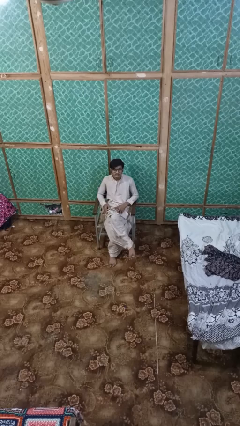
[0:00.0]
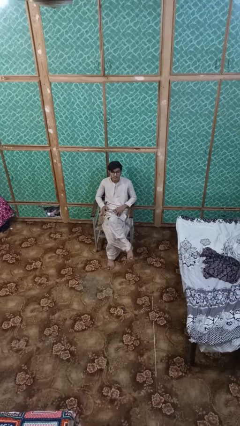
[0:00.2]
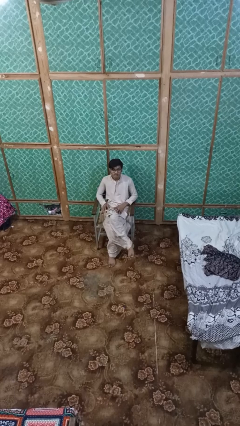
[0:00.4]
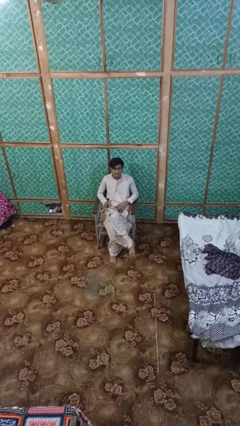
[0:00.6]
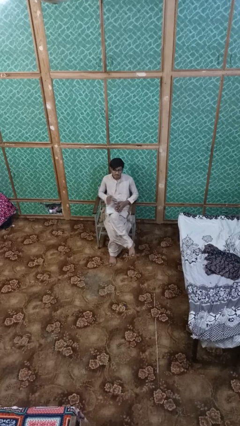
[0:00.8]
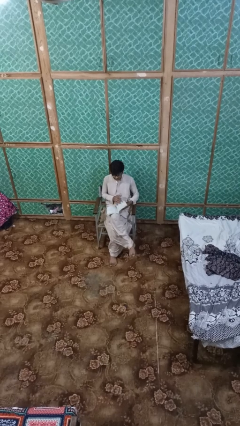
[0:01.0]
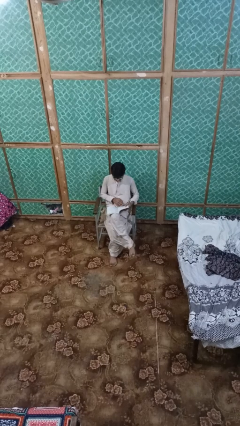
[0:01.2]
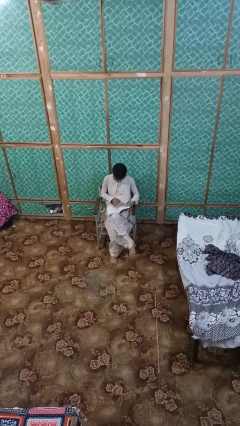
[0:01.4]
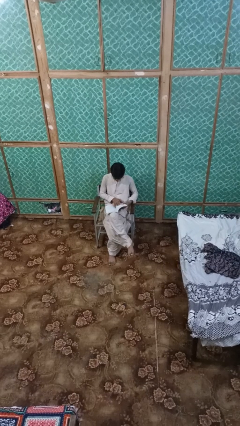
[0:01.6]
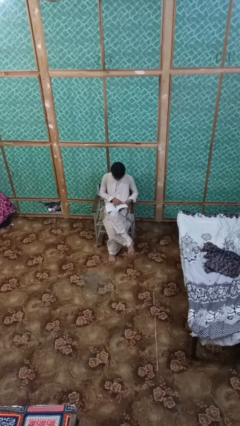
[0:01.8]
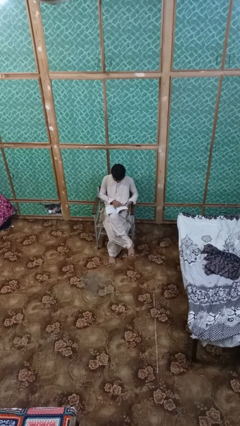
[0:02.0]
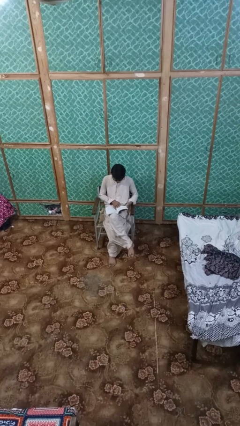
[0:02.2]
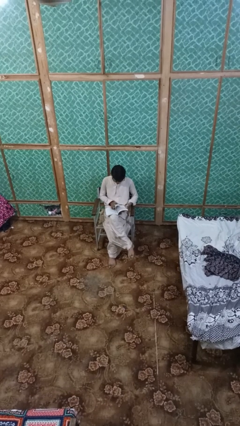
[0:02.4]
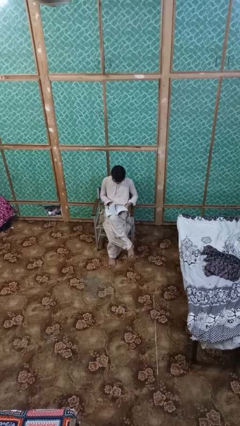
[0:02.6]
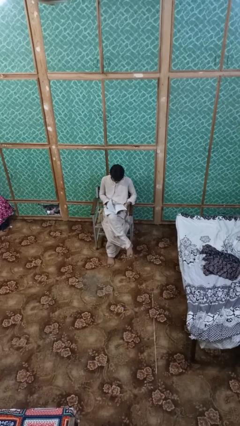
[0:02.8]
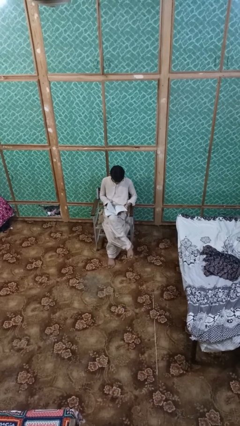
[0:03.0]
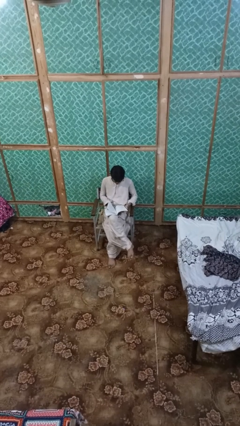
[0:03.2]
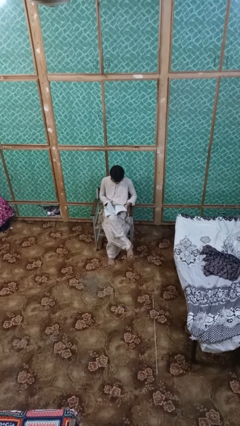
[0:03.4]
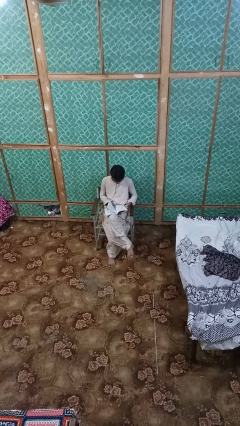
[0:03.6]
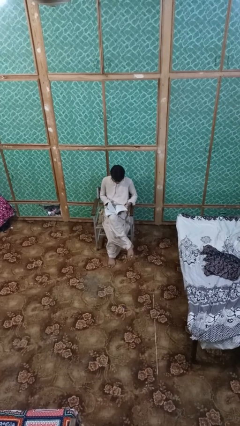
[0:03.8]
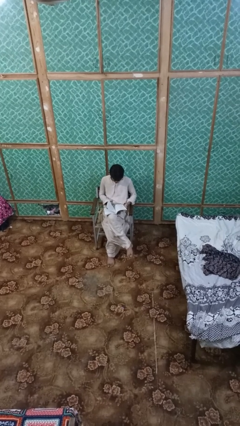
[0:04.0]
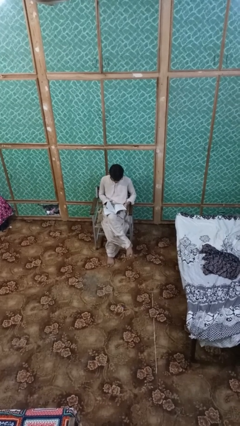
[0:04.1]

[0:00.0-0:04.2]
person reads book

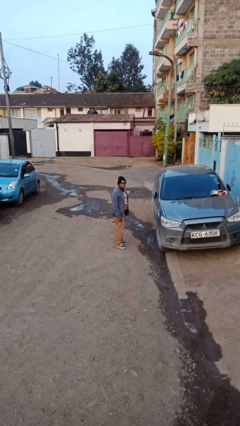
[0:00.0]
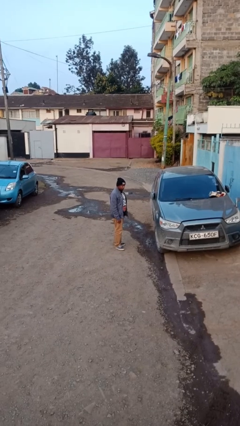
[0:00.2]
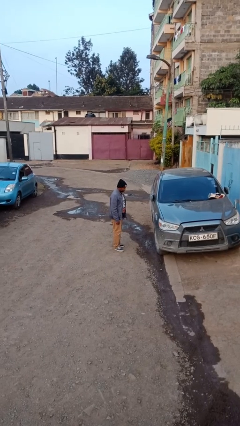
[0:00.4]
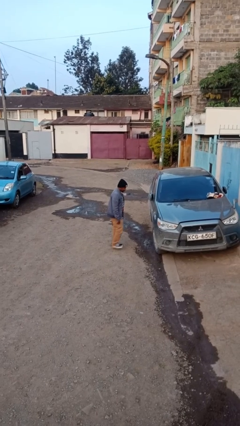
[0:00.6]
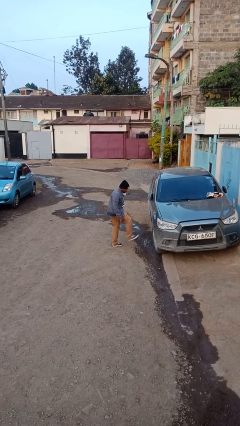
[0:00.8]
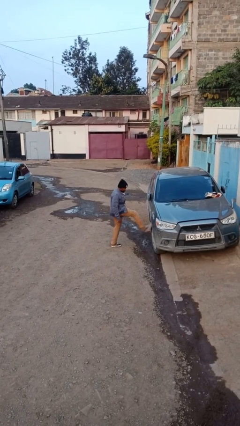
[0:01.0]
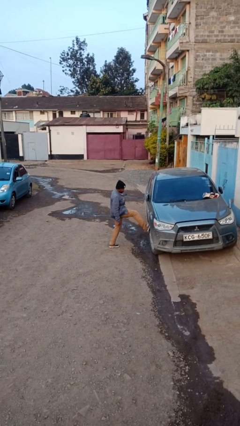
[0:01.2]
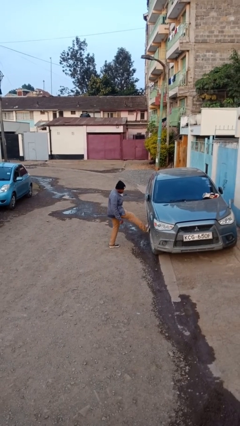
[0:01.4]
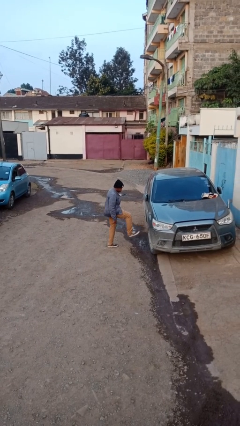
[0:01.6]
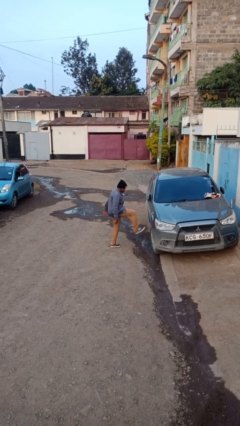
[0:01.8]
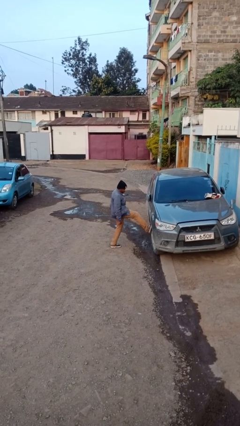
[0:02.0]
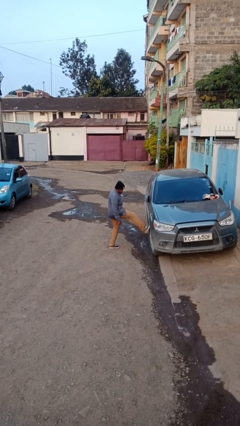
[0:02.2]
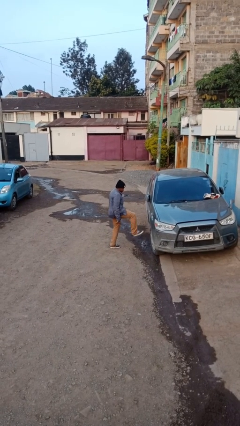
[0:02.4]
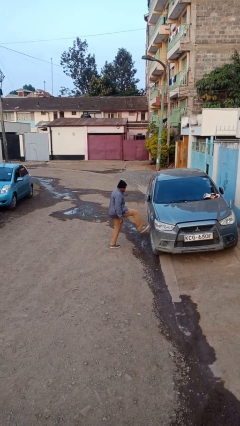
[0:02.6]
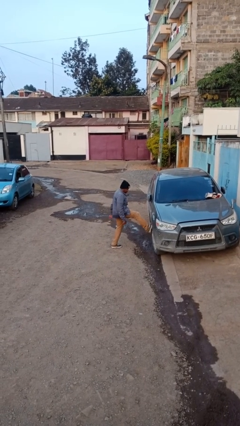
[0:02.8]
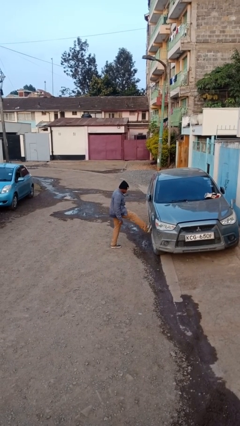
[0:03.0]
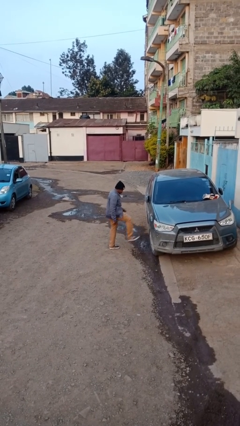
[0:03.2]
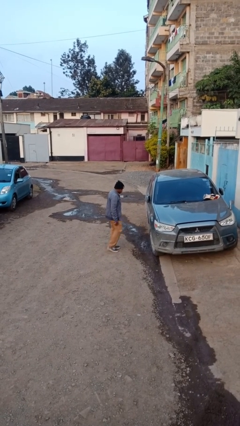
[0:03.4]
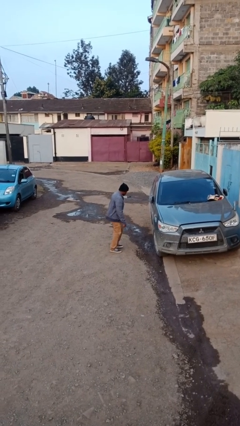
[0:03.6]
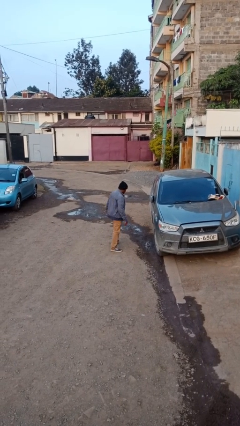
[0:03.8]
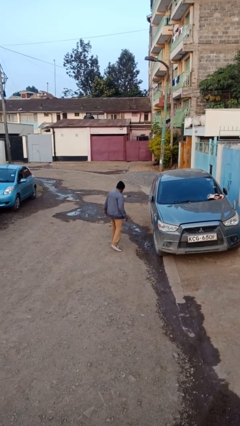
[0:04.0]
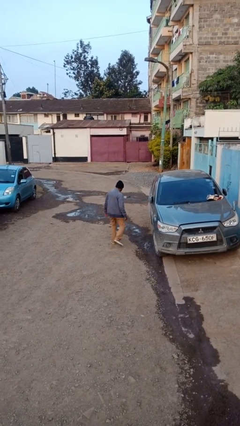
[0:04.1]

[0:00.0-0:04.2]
person kicks car tires

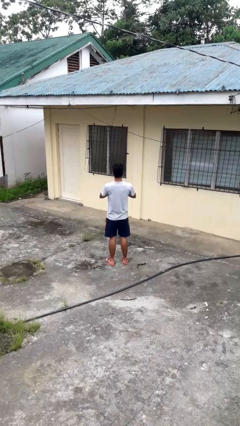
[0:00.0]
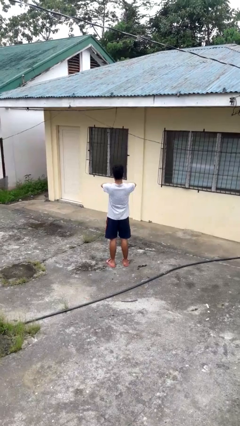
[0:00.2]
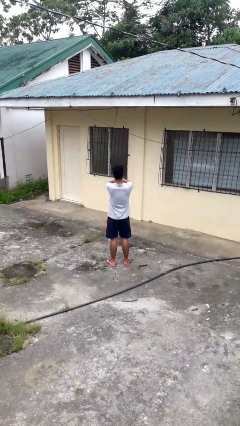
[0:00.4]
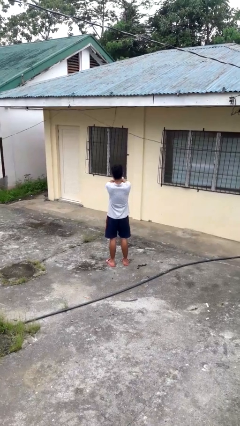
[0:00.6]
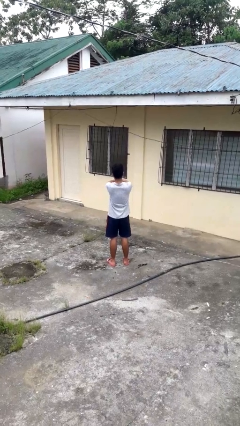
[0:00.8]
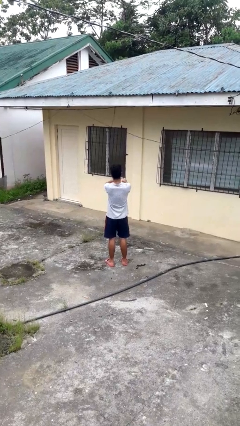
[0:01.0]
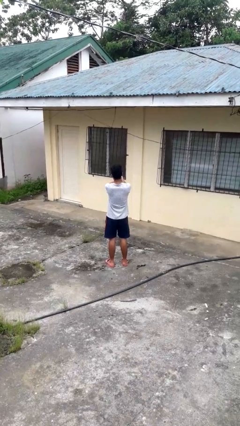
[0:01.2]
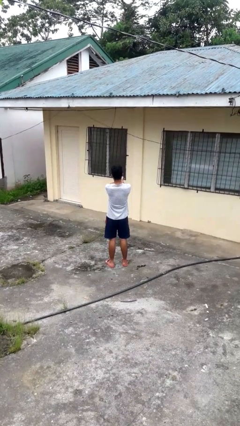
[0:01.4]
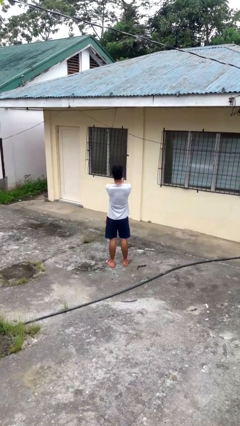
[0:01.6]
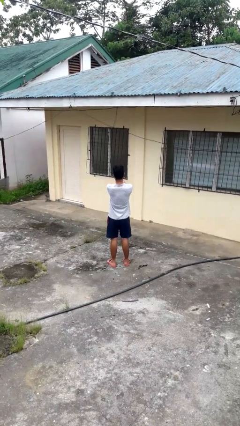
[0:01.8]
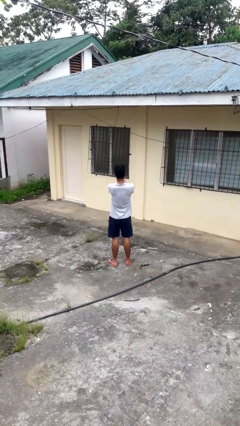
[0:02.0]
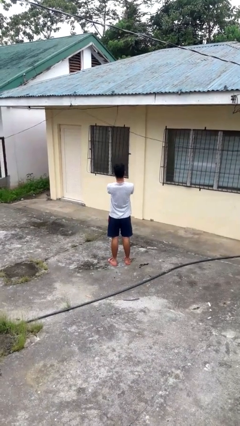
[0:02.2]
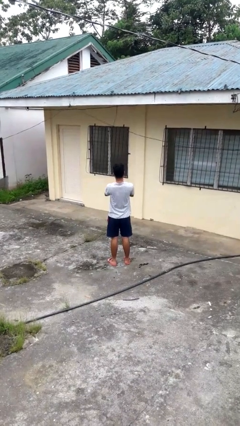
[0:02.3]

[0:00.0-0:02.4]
person cracks knuckles

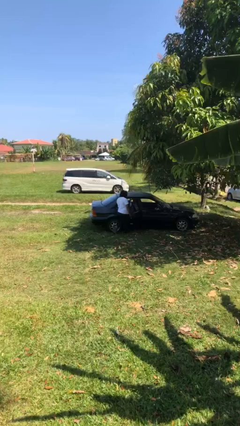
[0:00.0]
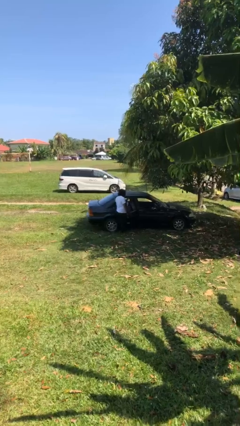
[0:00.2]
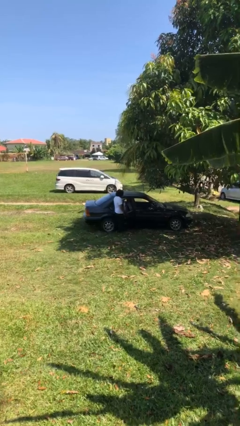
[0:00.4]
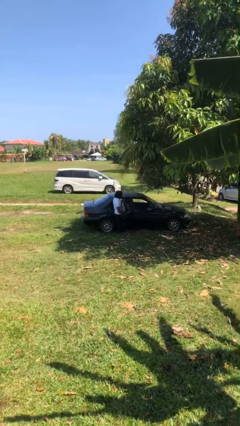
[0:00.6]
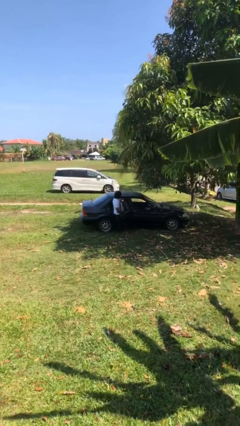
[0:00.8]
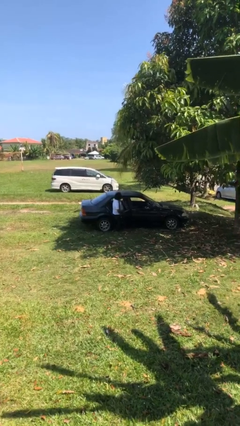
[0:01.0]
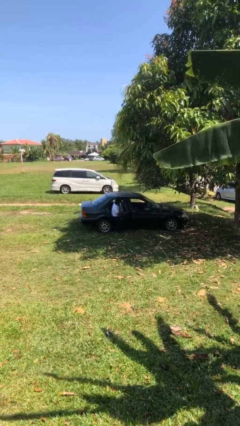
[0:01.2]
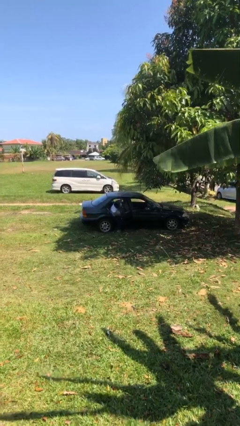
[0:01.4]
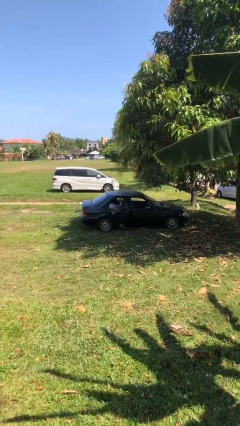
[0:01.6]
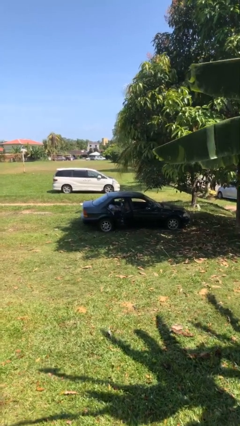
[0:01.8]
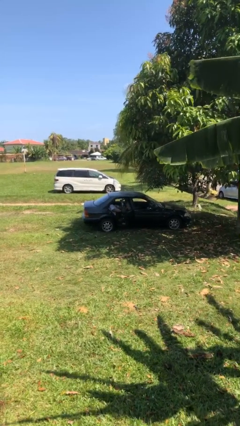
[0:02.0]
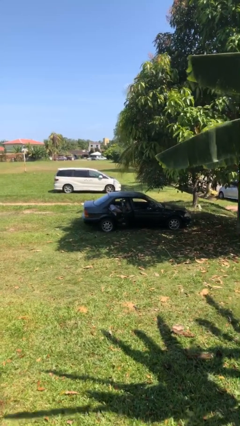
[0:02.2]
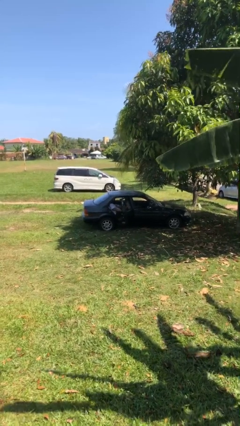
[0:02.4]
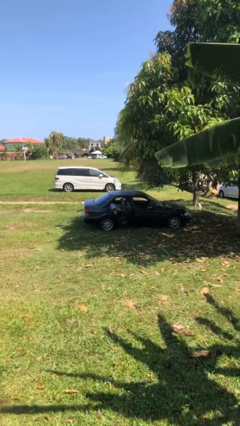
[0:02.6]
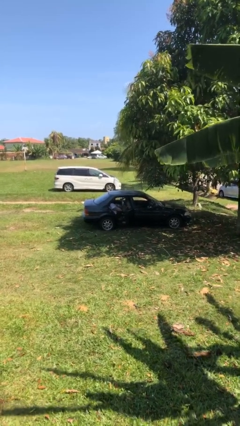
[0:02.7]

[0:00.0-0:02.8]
person enters car

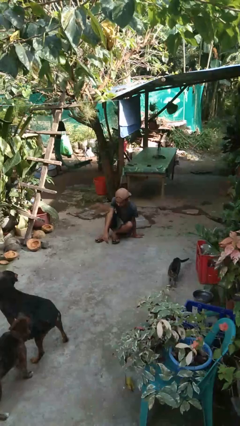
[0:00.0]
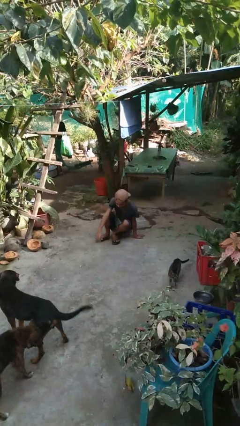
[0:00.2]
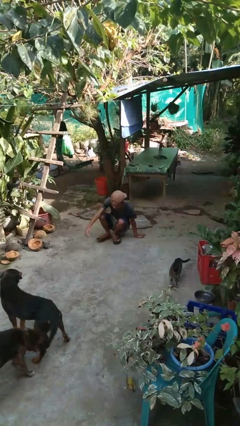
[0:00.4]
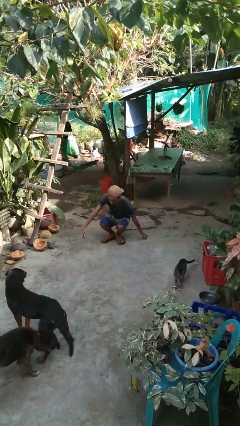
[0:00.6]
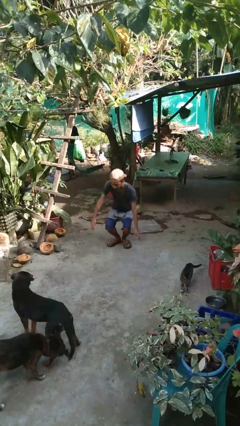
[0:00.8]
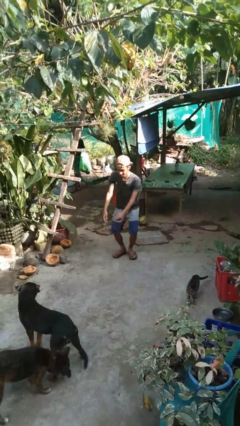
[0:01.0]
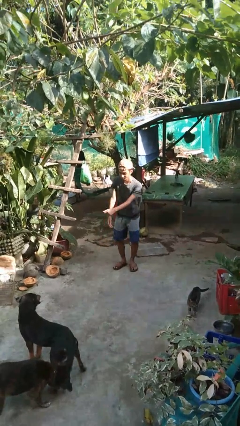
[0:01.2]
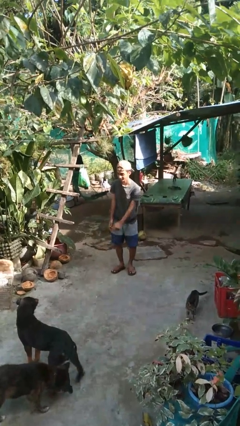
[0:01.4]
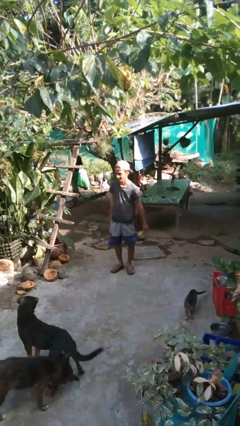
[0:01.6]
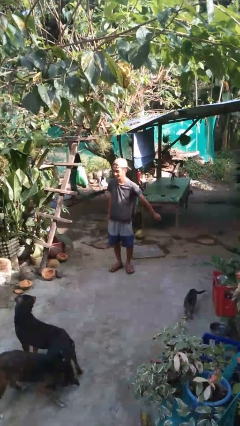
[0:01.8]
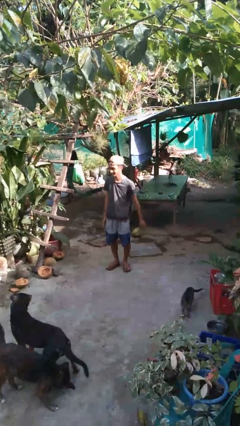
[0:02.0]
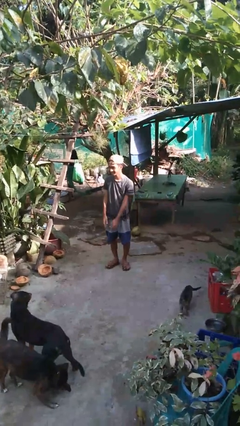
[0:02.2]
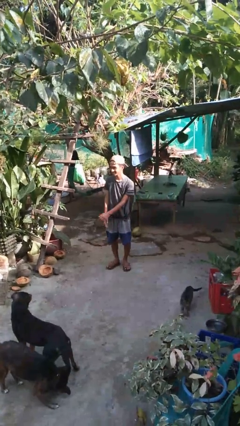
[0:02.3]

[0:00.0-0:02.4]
person stands up from floor

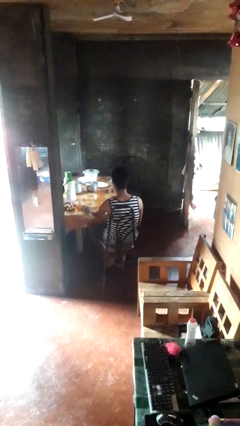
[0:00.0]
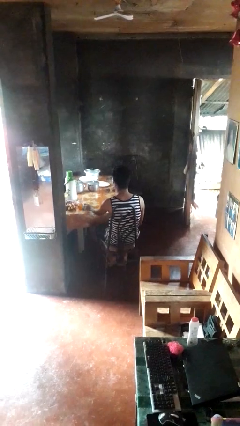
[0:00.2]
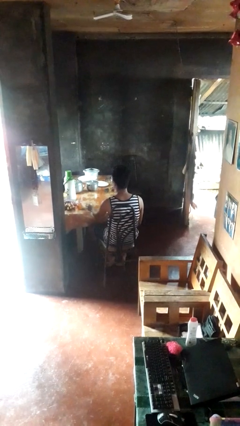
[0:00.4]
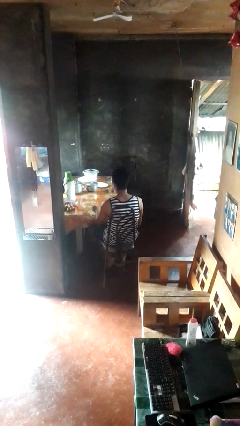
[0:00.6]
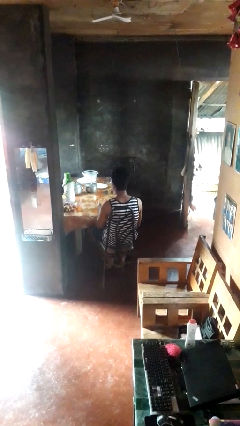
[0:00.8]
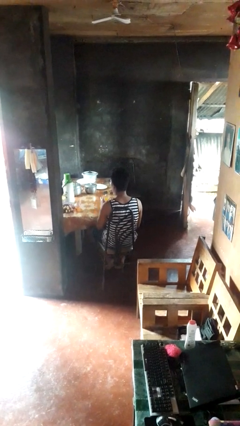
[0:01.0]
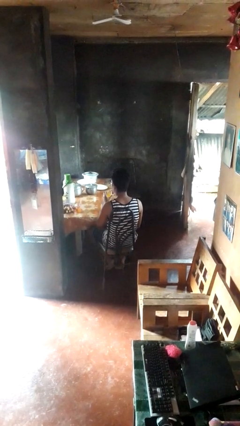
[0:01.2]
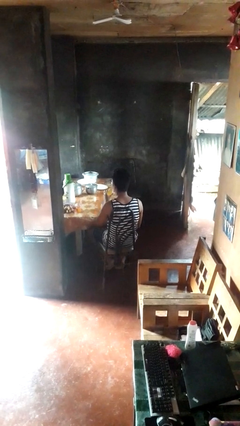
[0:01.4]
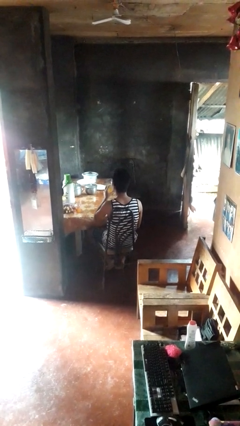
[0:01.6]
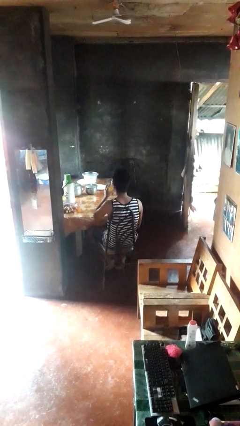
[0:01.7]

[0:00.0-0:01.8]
person picks up object from table
